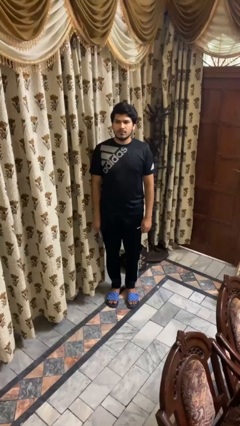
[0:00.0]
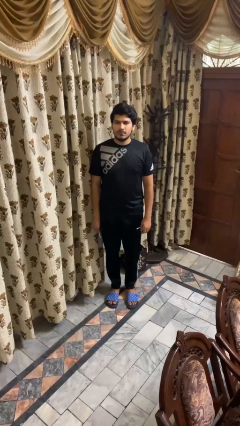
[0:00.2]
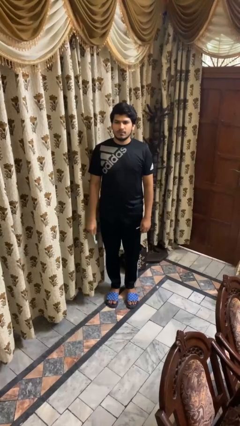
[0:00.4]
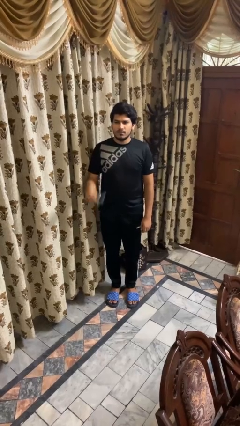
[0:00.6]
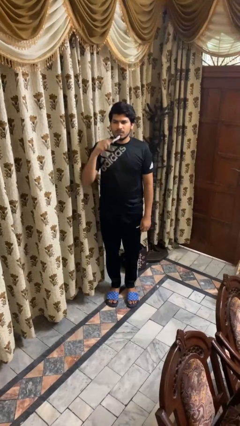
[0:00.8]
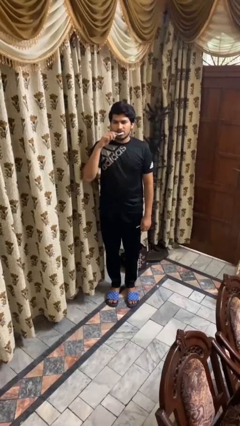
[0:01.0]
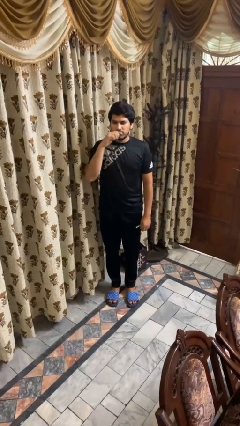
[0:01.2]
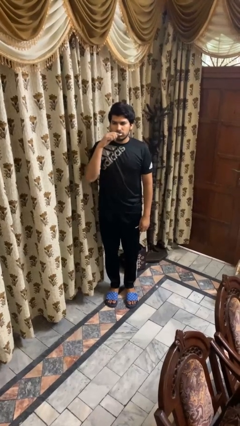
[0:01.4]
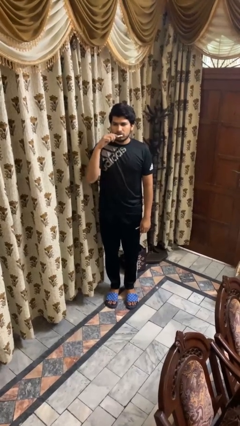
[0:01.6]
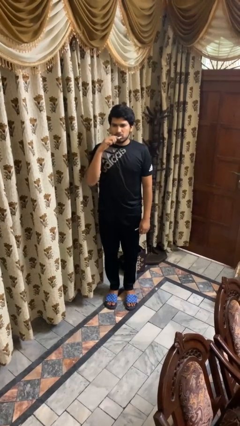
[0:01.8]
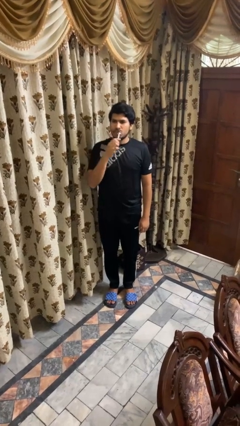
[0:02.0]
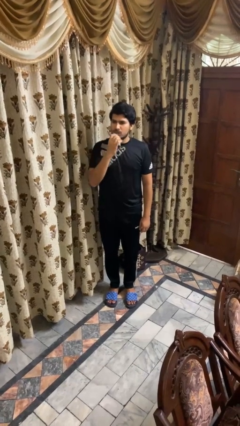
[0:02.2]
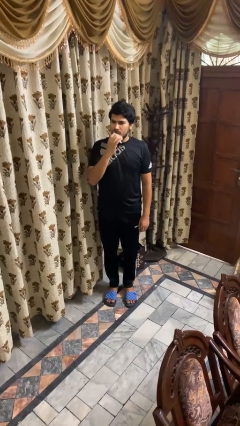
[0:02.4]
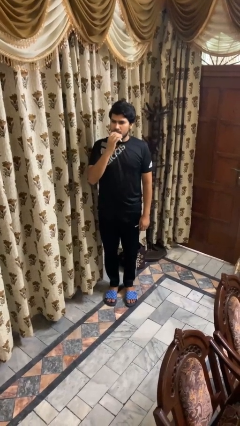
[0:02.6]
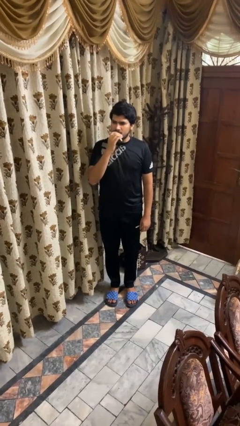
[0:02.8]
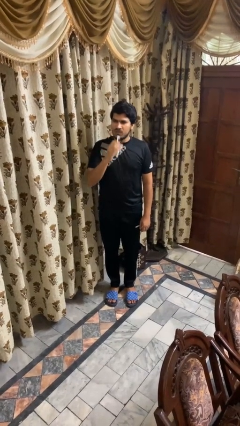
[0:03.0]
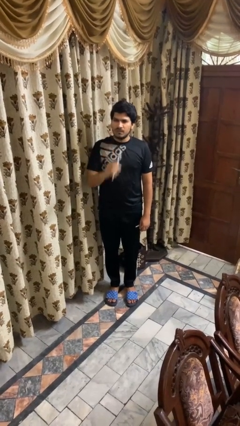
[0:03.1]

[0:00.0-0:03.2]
person brushes teeth

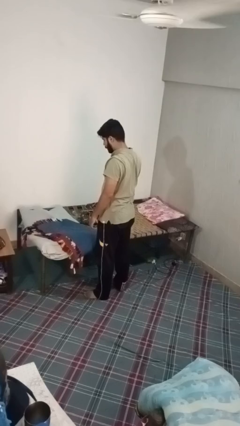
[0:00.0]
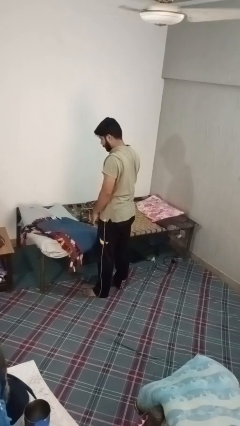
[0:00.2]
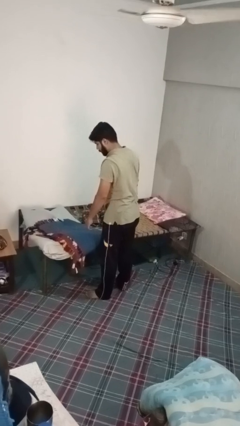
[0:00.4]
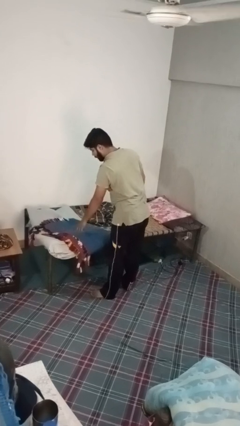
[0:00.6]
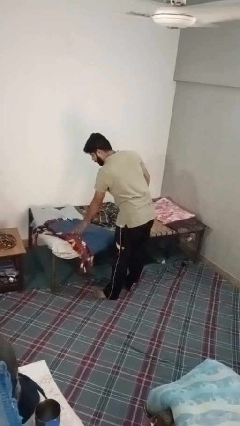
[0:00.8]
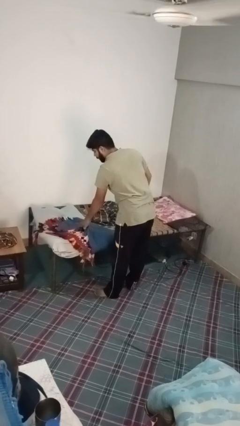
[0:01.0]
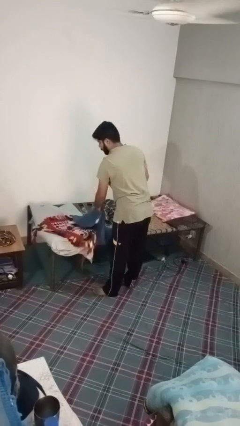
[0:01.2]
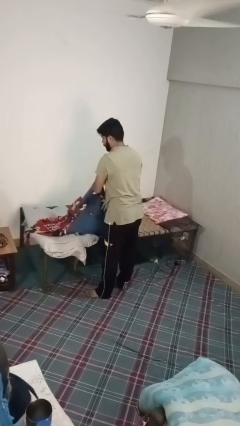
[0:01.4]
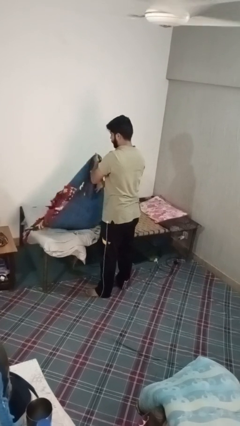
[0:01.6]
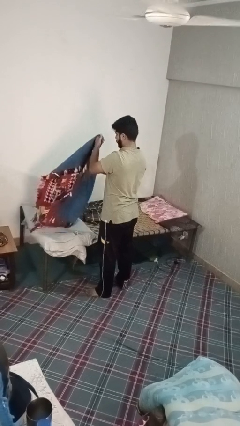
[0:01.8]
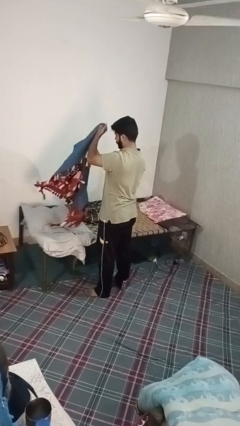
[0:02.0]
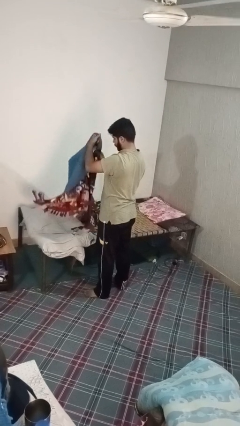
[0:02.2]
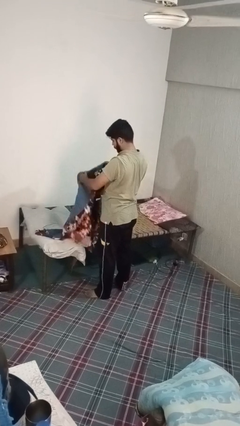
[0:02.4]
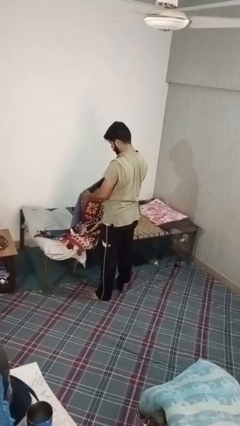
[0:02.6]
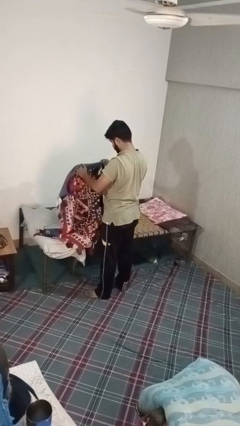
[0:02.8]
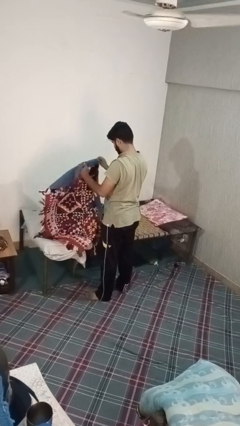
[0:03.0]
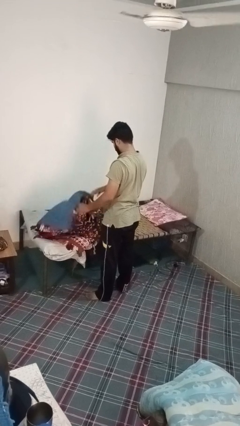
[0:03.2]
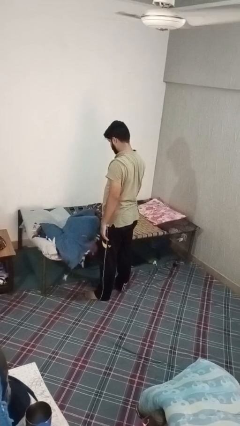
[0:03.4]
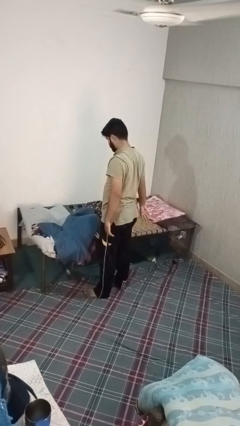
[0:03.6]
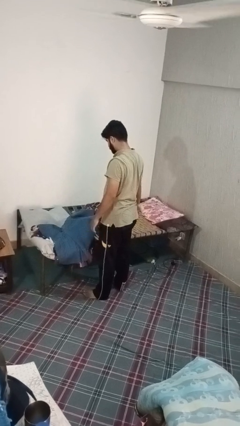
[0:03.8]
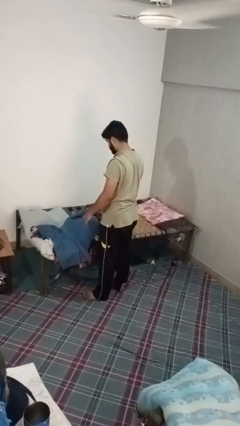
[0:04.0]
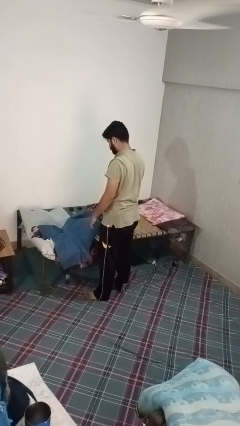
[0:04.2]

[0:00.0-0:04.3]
person unfolds blanket

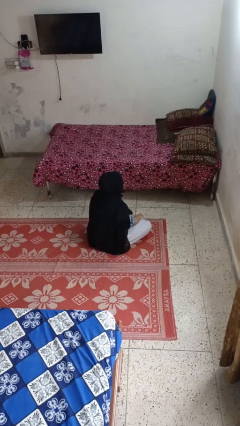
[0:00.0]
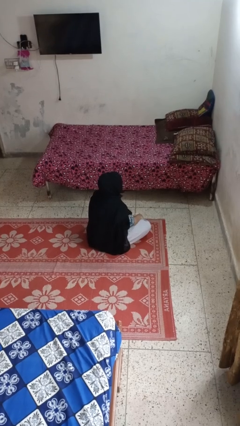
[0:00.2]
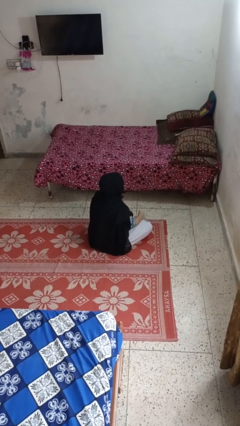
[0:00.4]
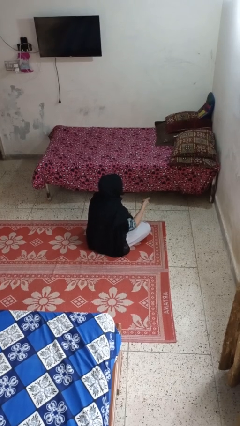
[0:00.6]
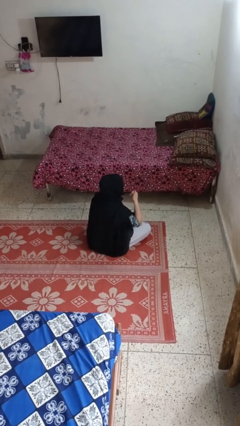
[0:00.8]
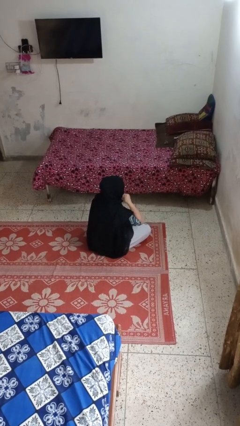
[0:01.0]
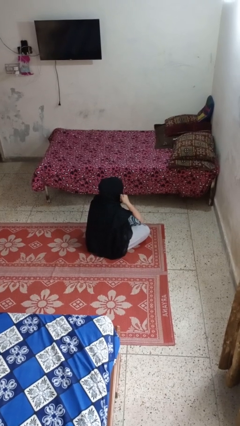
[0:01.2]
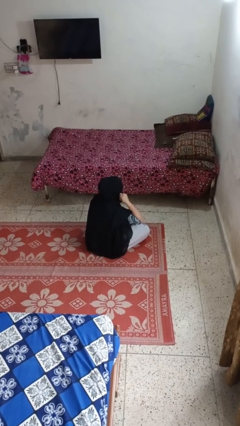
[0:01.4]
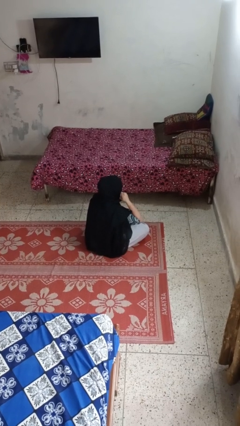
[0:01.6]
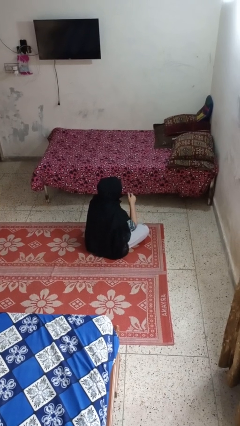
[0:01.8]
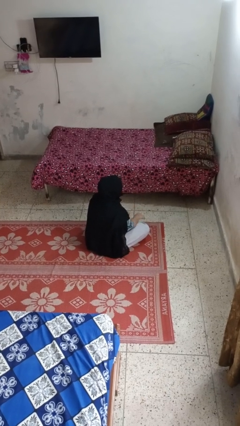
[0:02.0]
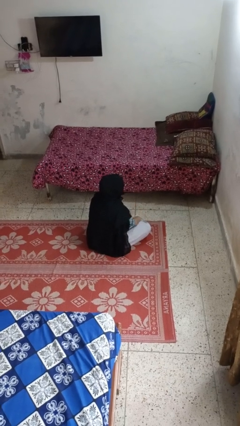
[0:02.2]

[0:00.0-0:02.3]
person gestures call me

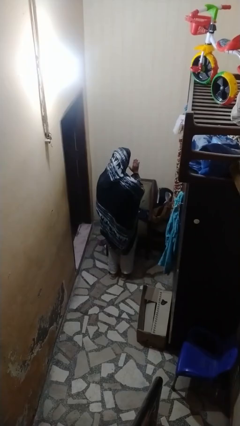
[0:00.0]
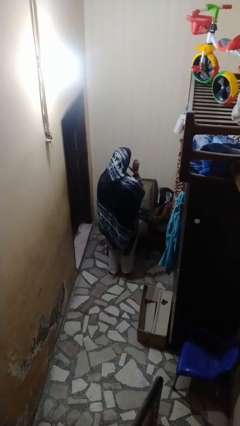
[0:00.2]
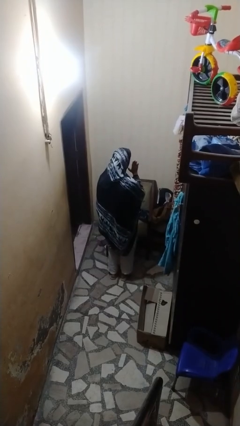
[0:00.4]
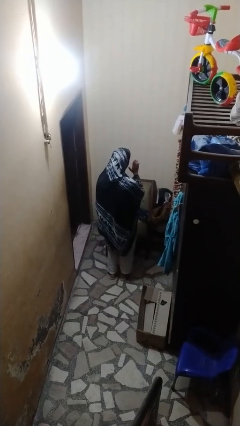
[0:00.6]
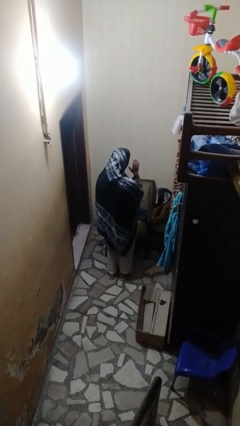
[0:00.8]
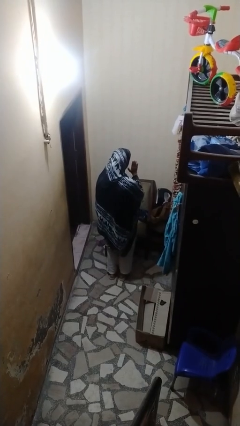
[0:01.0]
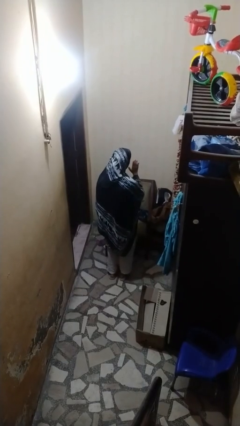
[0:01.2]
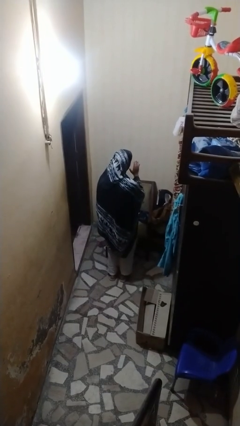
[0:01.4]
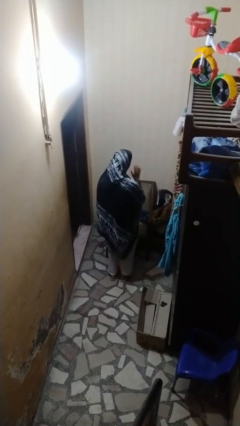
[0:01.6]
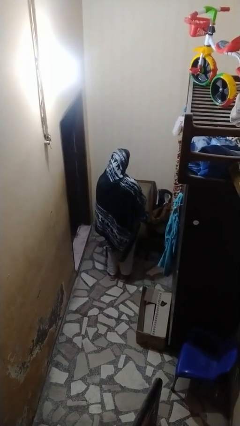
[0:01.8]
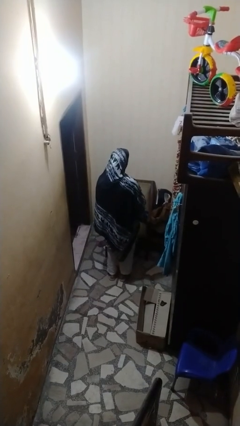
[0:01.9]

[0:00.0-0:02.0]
person gestures stop

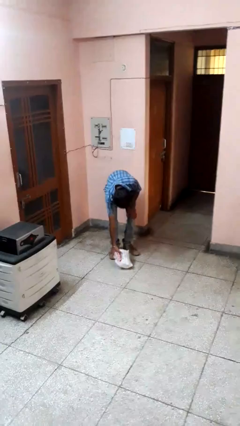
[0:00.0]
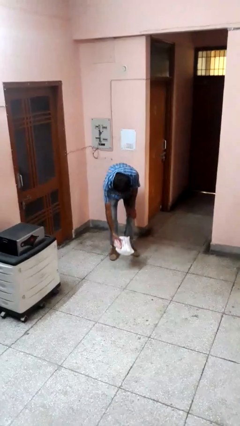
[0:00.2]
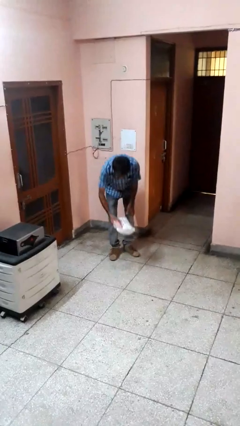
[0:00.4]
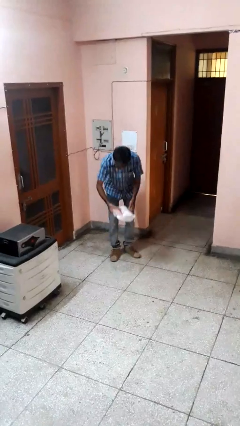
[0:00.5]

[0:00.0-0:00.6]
person picks up object from floor

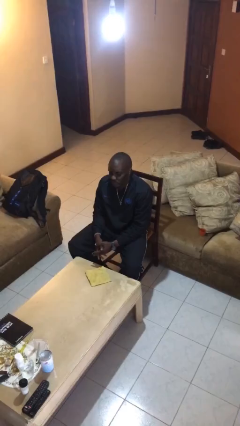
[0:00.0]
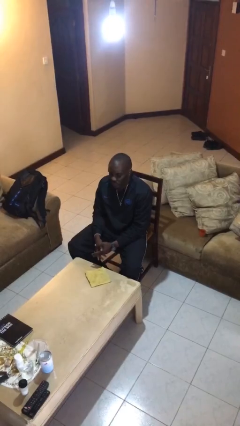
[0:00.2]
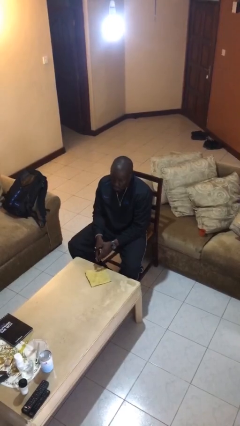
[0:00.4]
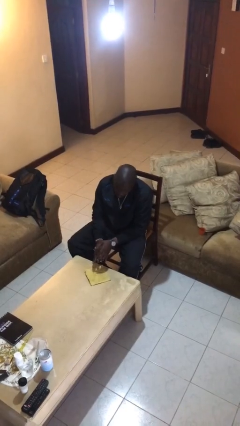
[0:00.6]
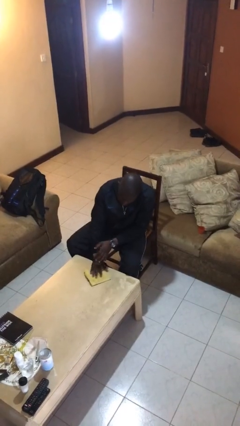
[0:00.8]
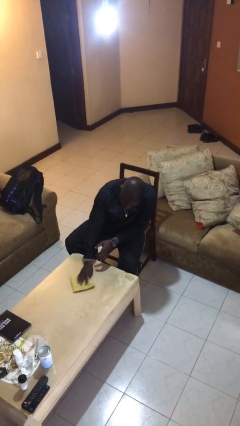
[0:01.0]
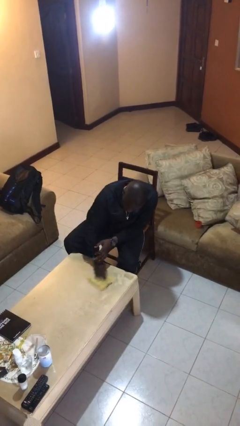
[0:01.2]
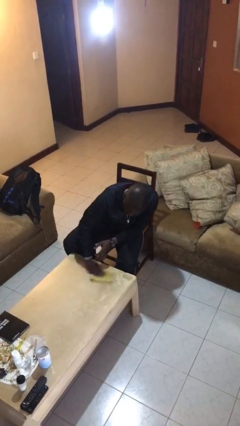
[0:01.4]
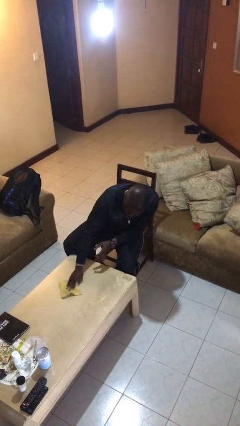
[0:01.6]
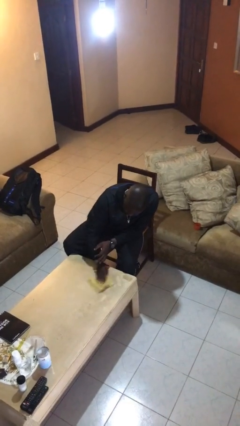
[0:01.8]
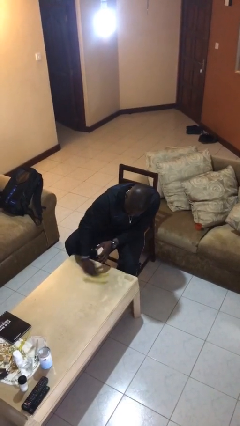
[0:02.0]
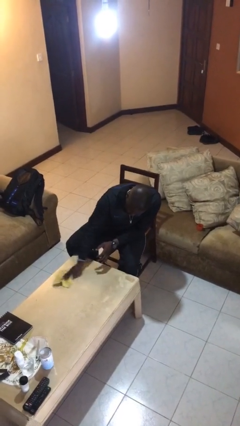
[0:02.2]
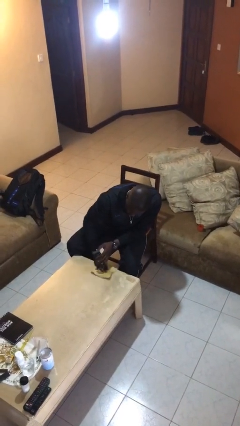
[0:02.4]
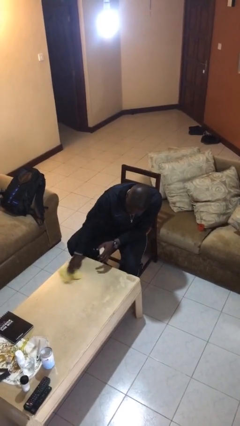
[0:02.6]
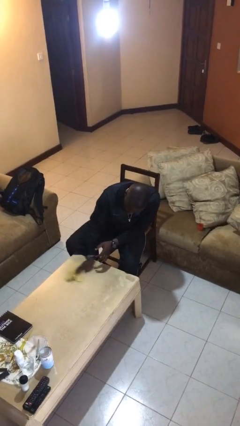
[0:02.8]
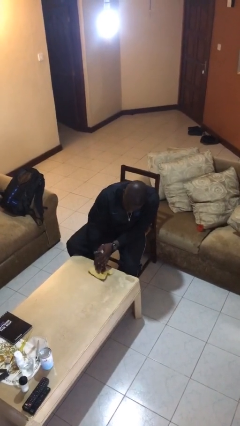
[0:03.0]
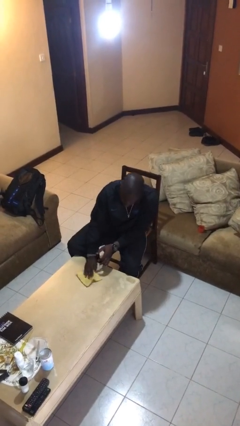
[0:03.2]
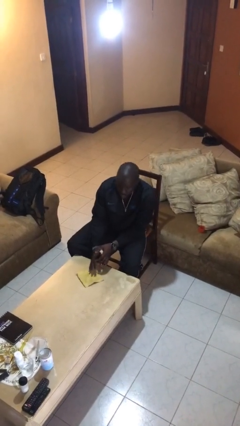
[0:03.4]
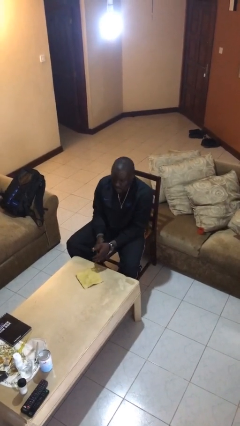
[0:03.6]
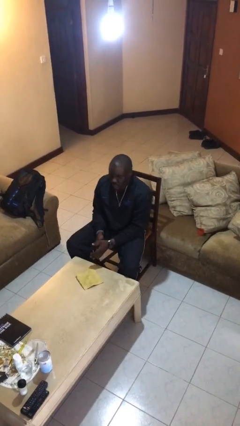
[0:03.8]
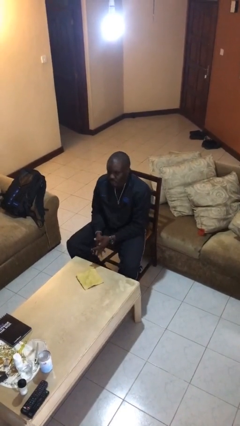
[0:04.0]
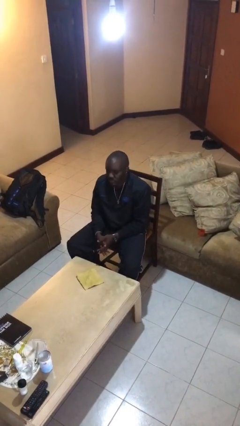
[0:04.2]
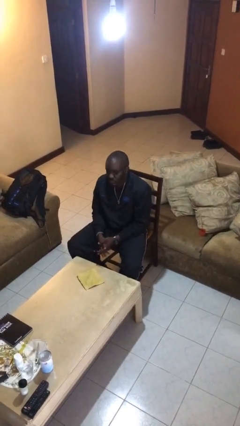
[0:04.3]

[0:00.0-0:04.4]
person cleans table with rag

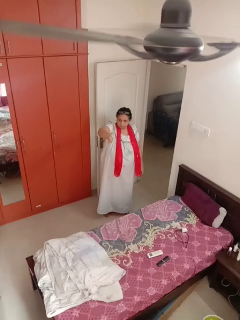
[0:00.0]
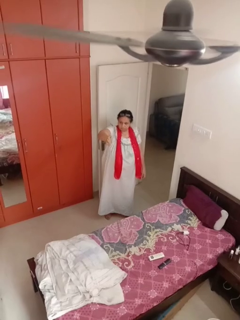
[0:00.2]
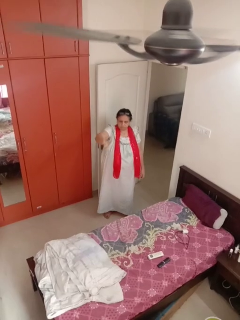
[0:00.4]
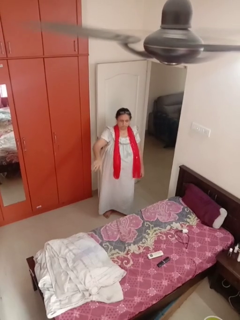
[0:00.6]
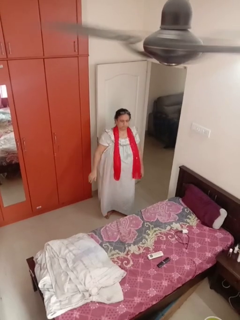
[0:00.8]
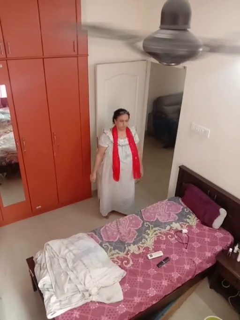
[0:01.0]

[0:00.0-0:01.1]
person gestures swipe right
